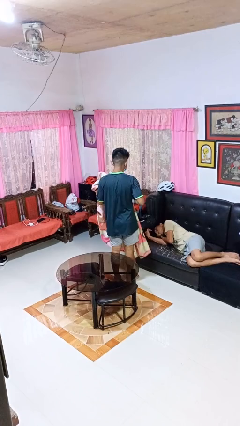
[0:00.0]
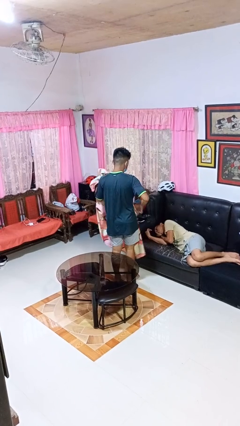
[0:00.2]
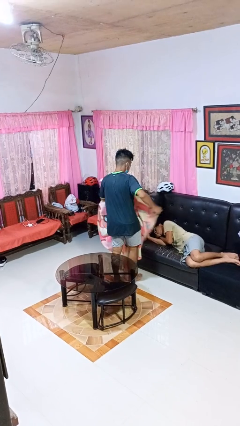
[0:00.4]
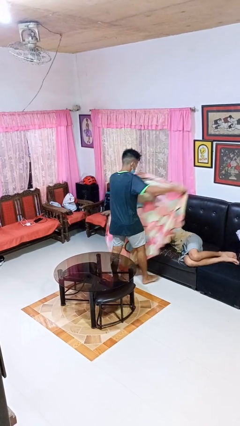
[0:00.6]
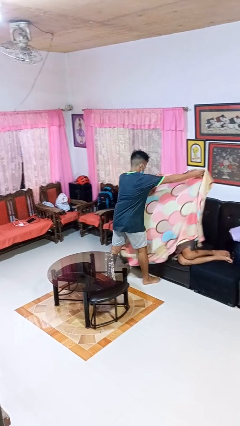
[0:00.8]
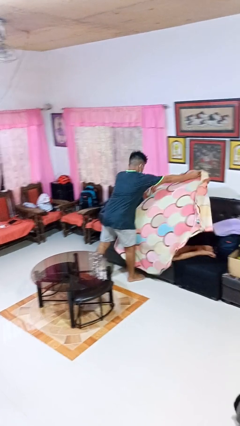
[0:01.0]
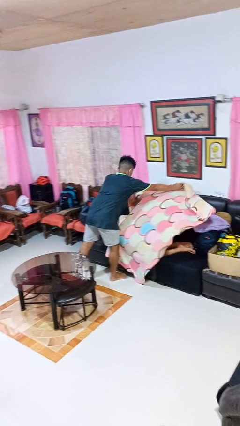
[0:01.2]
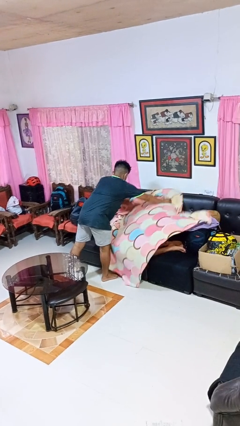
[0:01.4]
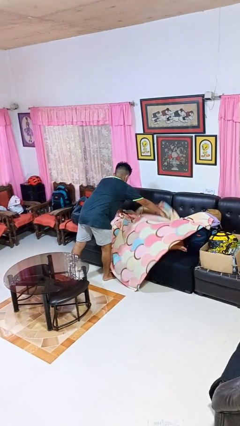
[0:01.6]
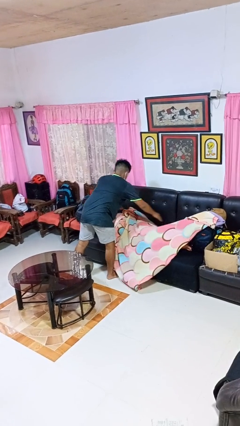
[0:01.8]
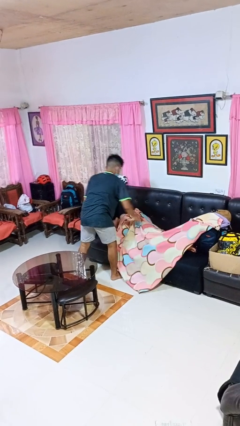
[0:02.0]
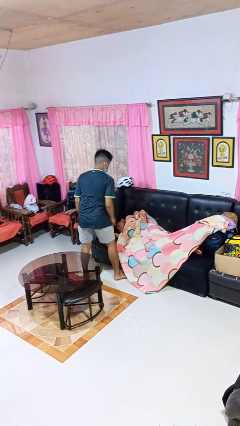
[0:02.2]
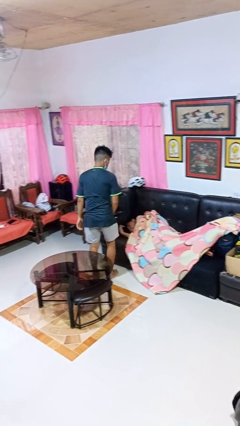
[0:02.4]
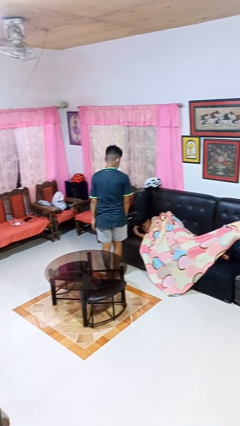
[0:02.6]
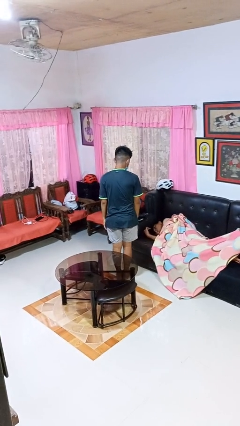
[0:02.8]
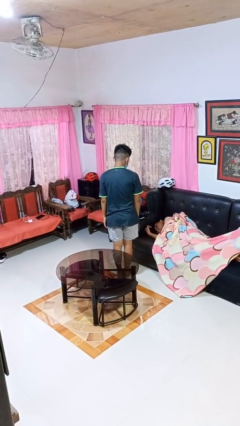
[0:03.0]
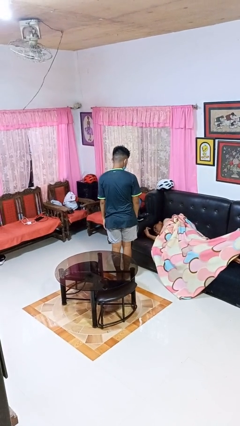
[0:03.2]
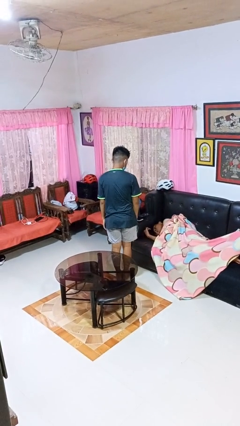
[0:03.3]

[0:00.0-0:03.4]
person covers friend with blanket

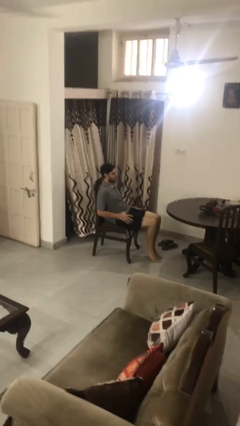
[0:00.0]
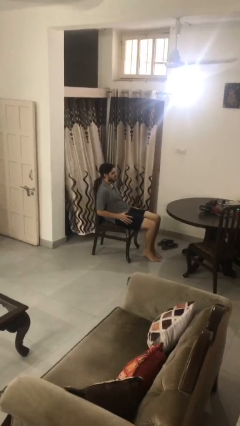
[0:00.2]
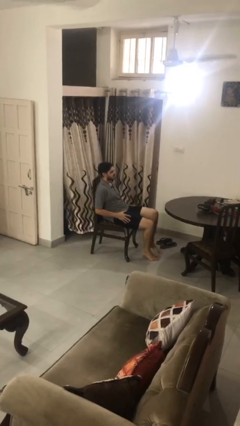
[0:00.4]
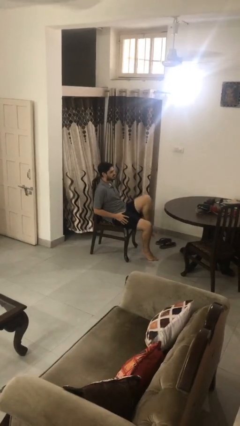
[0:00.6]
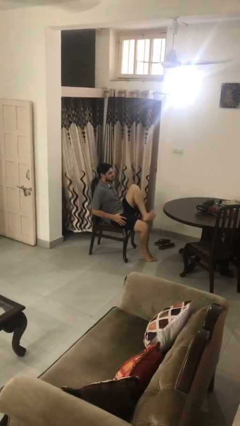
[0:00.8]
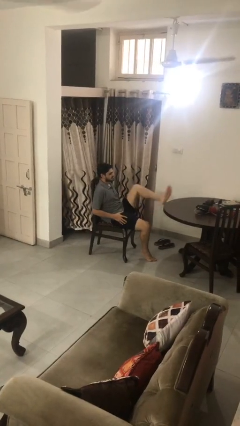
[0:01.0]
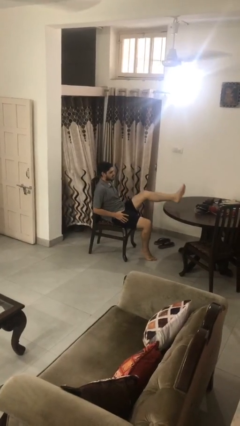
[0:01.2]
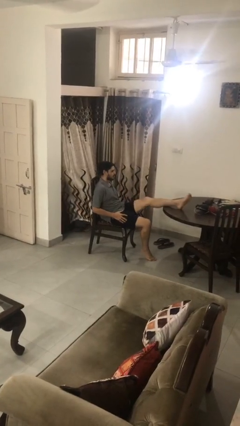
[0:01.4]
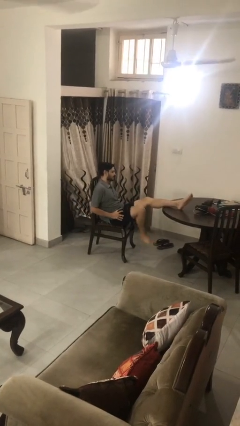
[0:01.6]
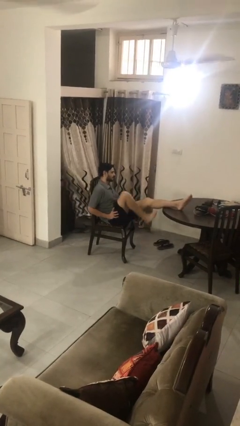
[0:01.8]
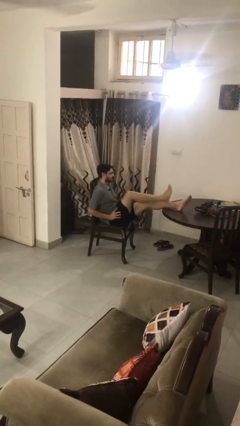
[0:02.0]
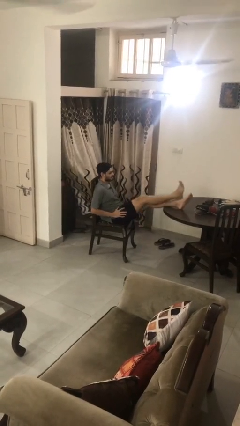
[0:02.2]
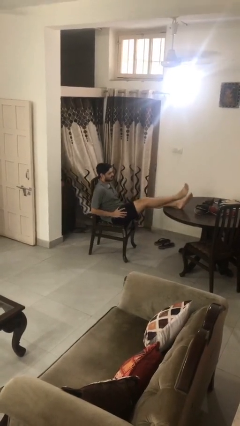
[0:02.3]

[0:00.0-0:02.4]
person puts feet up

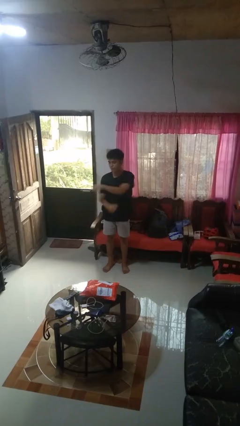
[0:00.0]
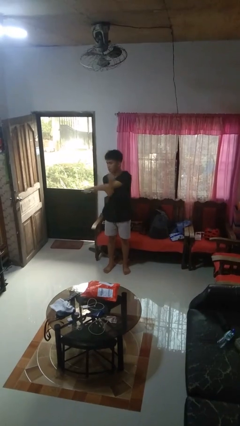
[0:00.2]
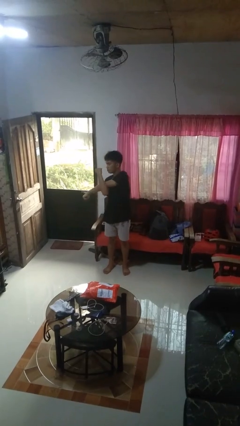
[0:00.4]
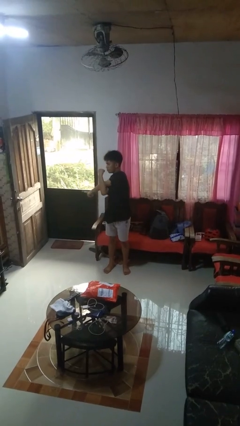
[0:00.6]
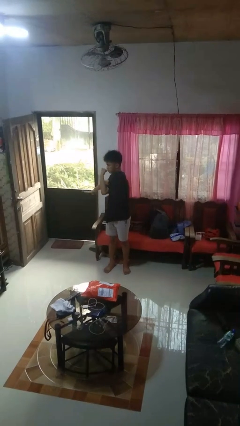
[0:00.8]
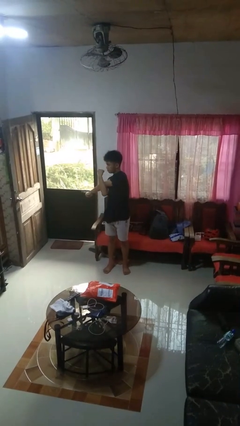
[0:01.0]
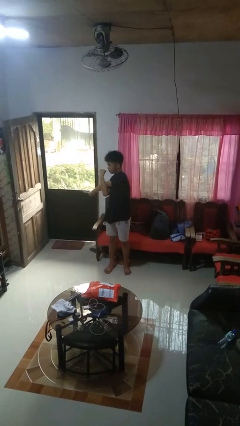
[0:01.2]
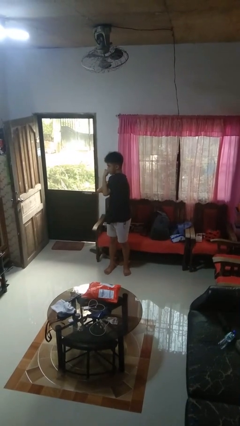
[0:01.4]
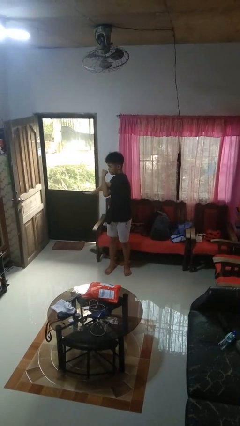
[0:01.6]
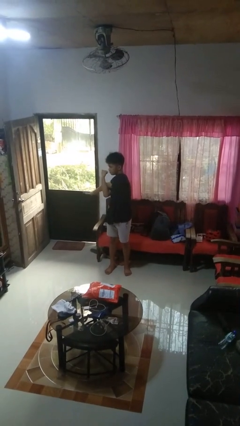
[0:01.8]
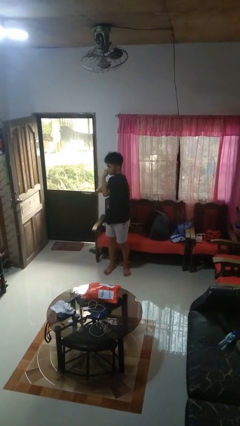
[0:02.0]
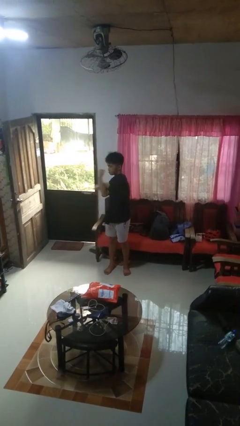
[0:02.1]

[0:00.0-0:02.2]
person stretches arms to side

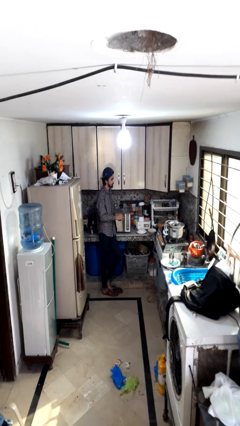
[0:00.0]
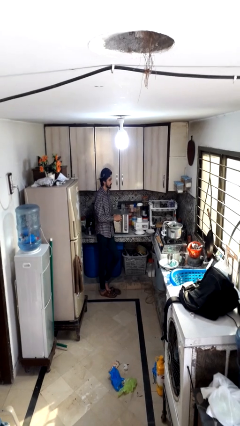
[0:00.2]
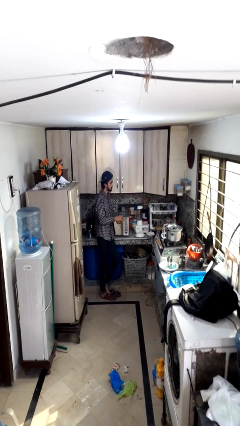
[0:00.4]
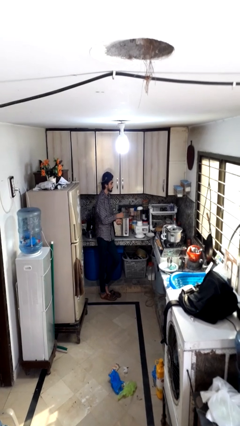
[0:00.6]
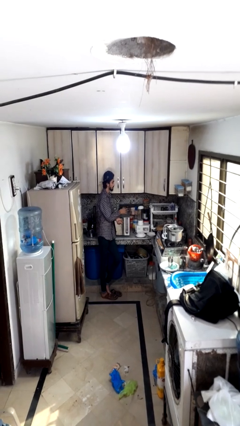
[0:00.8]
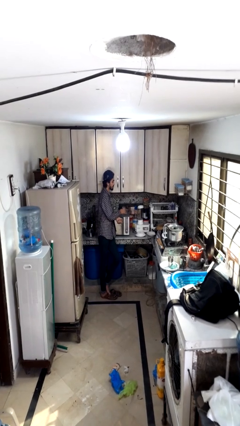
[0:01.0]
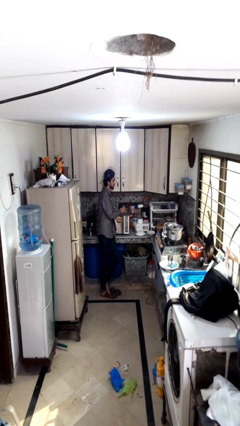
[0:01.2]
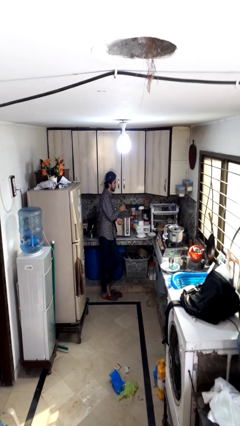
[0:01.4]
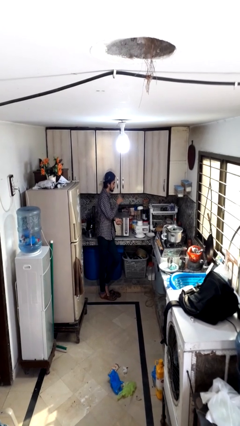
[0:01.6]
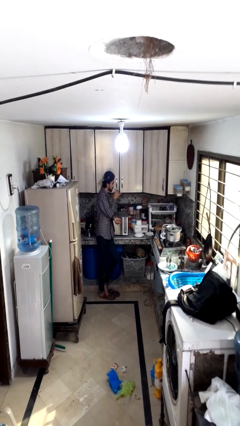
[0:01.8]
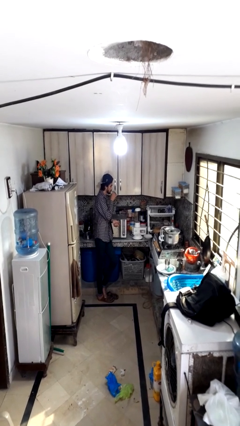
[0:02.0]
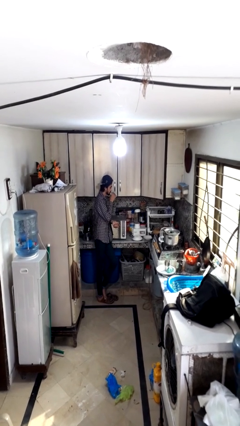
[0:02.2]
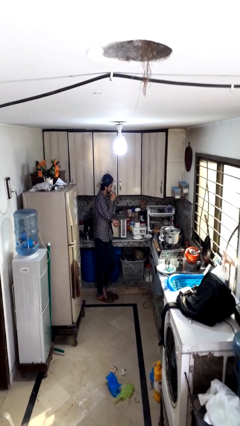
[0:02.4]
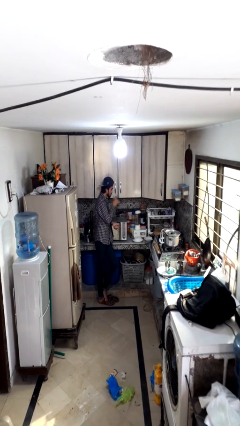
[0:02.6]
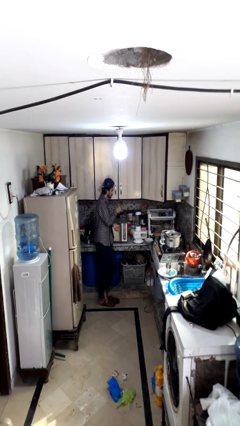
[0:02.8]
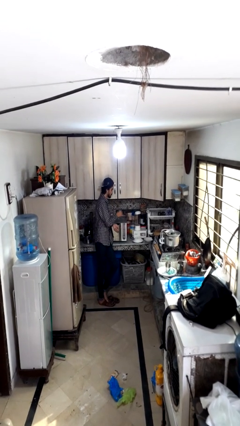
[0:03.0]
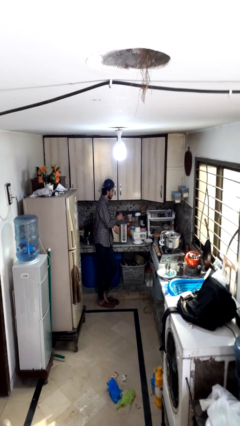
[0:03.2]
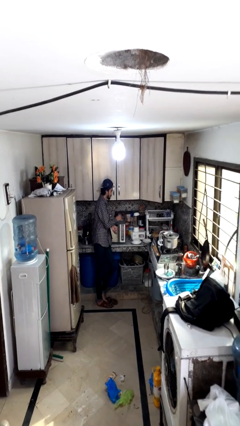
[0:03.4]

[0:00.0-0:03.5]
person drinks from cup

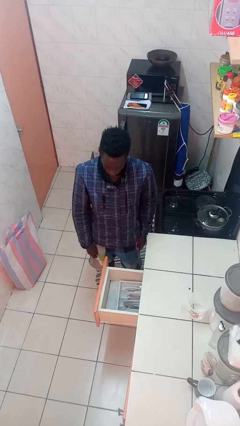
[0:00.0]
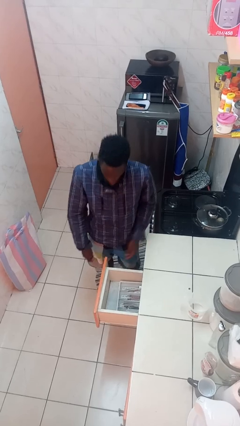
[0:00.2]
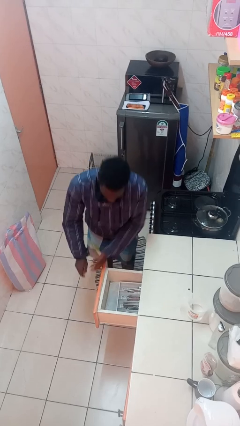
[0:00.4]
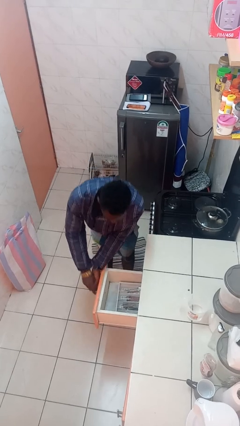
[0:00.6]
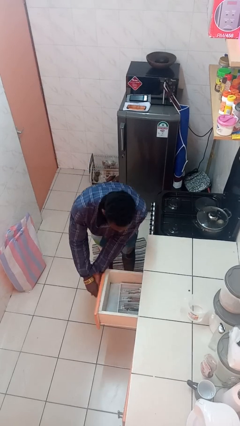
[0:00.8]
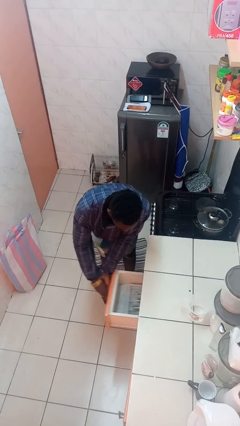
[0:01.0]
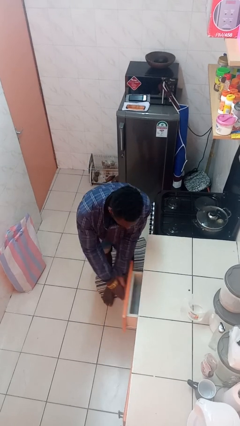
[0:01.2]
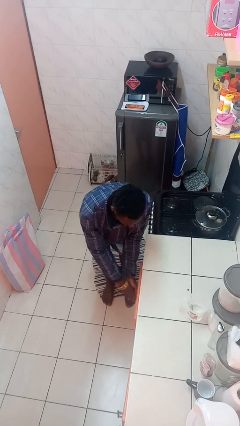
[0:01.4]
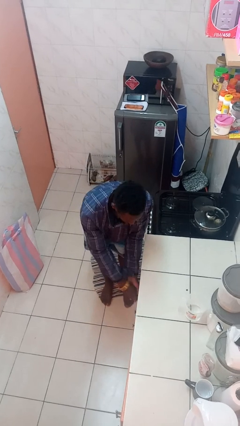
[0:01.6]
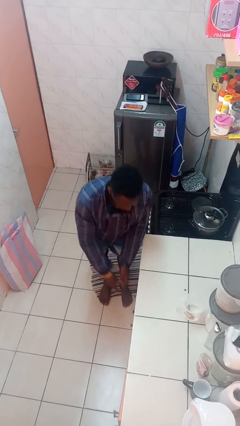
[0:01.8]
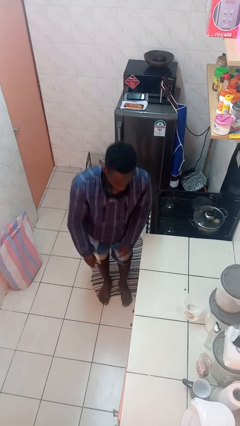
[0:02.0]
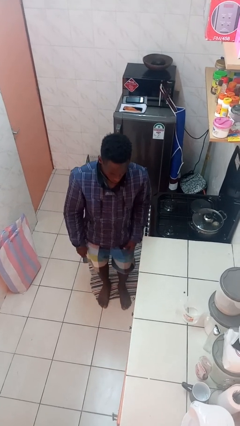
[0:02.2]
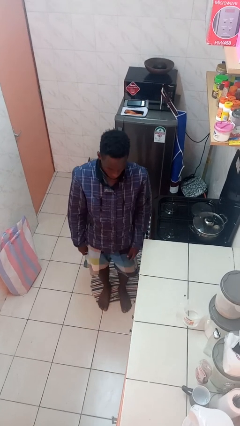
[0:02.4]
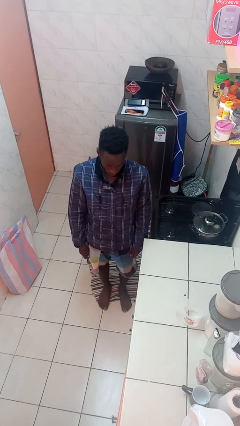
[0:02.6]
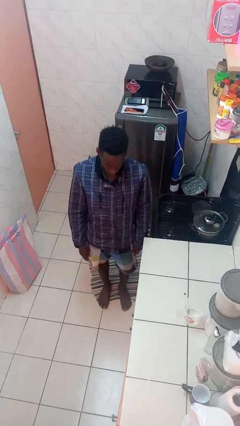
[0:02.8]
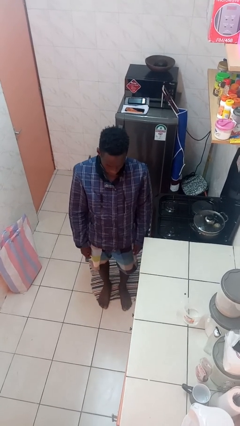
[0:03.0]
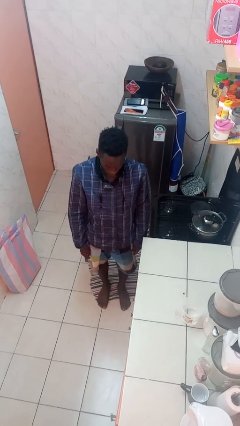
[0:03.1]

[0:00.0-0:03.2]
person closes kitchen drawer

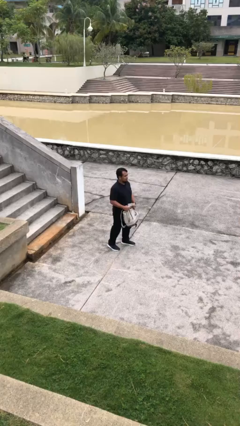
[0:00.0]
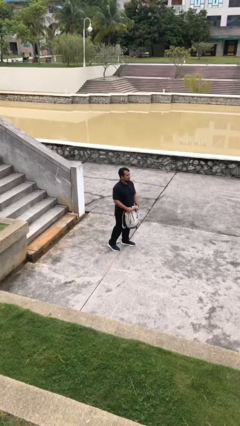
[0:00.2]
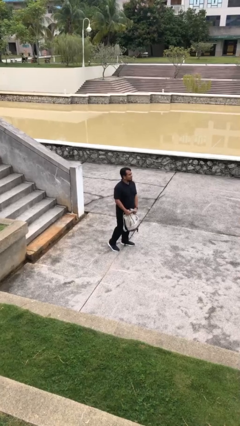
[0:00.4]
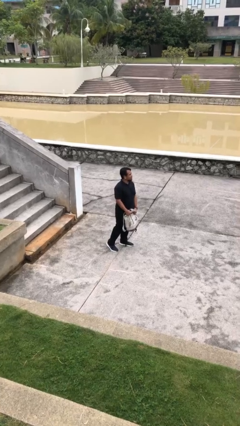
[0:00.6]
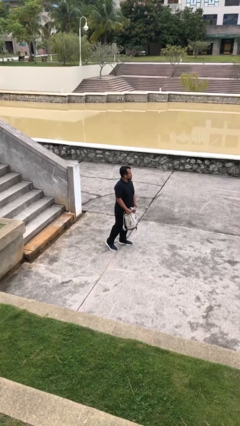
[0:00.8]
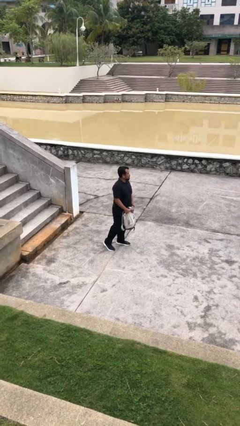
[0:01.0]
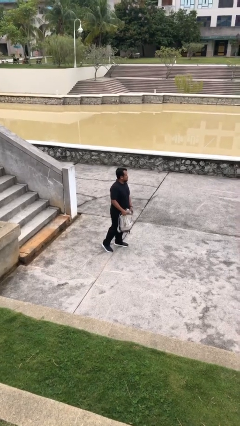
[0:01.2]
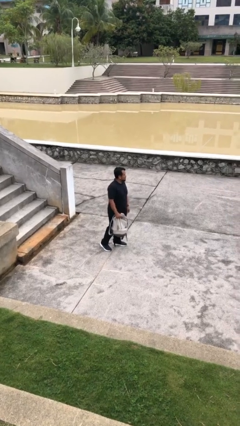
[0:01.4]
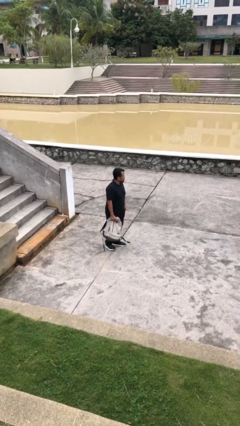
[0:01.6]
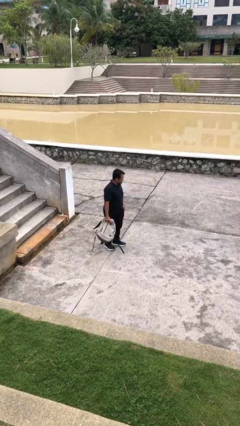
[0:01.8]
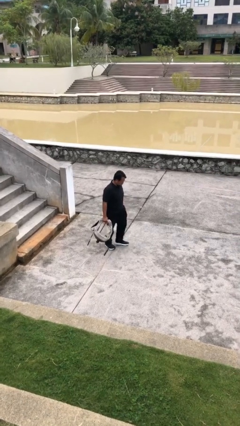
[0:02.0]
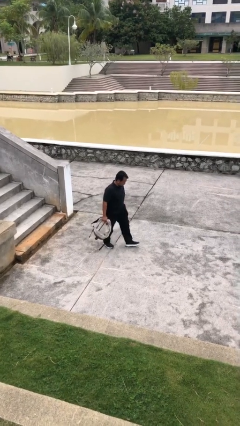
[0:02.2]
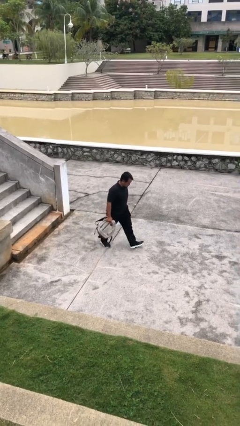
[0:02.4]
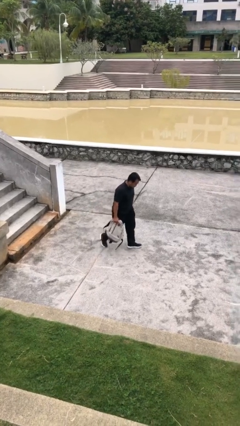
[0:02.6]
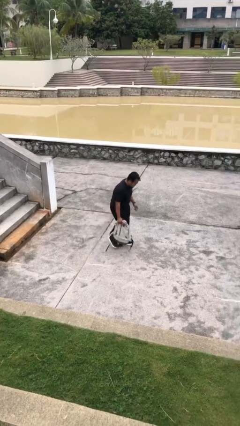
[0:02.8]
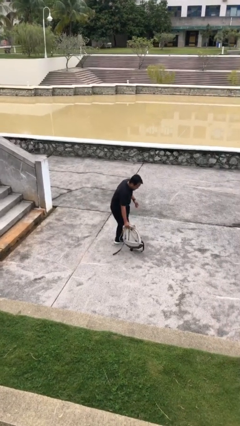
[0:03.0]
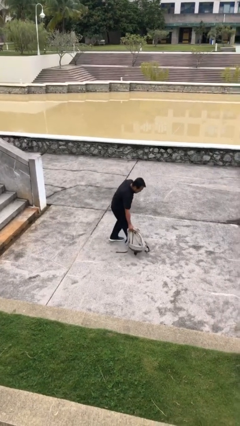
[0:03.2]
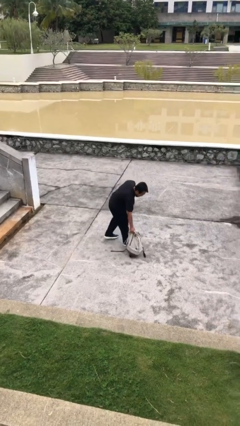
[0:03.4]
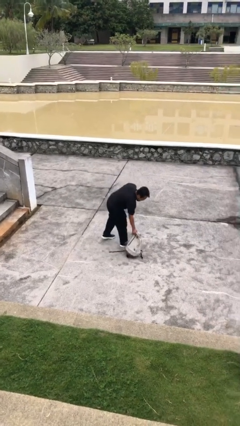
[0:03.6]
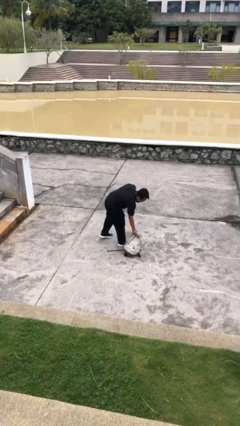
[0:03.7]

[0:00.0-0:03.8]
person puts down object on floor
